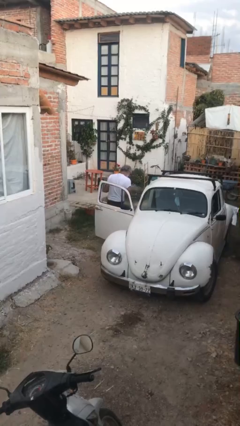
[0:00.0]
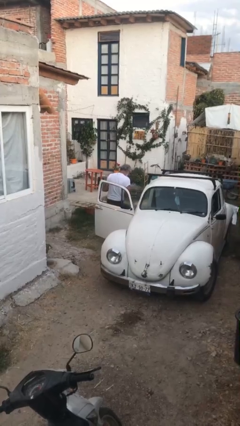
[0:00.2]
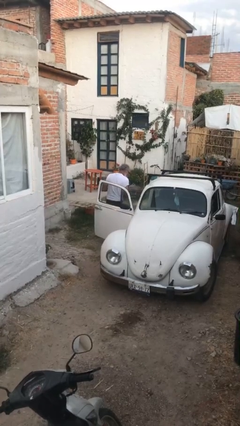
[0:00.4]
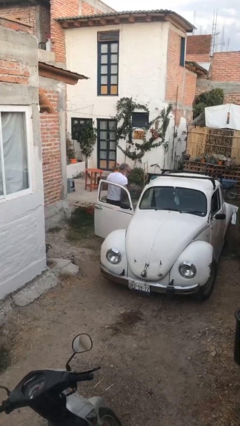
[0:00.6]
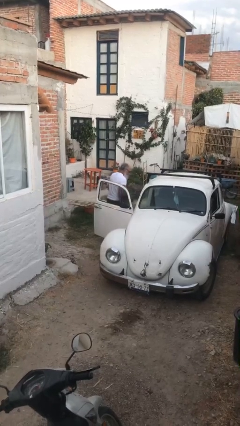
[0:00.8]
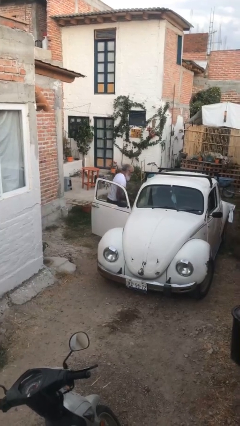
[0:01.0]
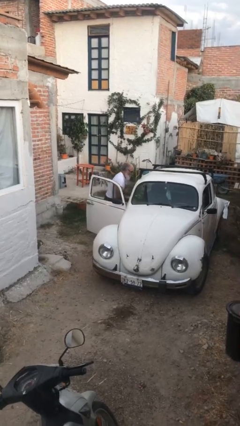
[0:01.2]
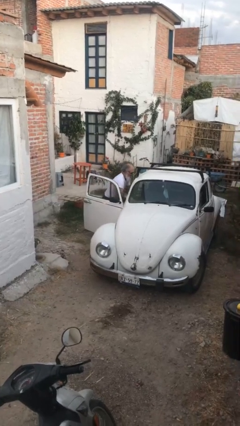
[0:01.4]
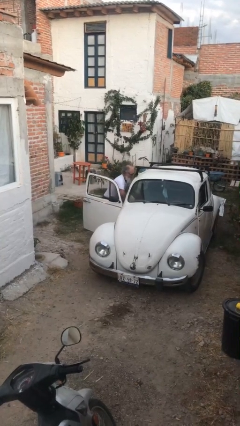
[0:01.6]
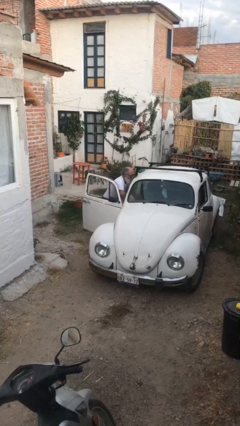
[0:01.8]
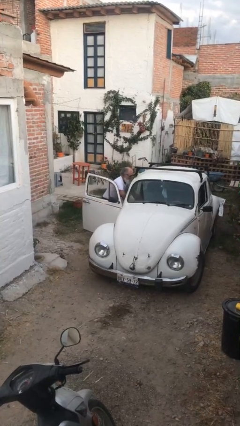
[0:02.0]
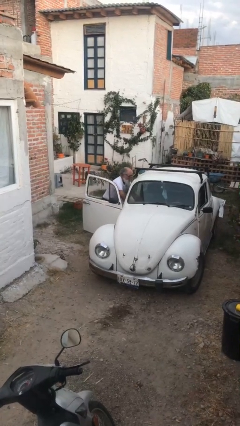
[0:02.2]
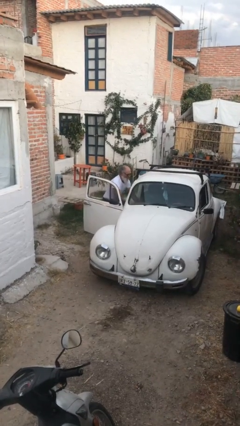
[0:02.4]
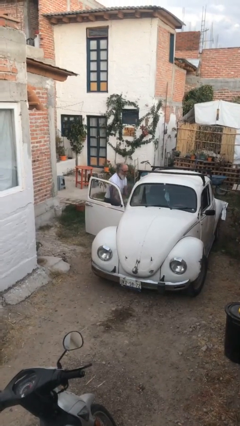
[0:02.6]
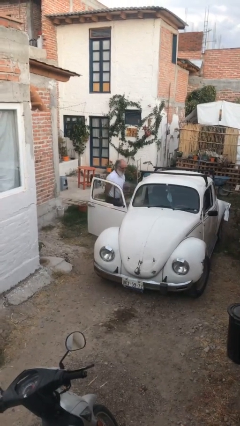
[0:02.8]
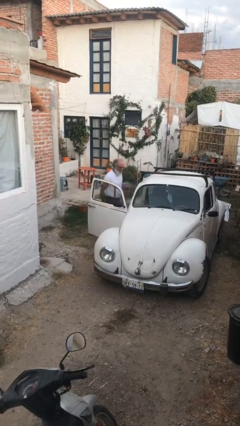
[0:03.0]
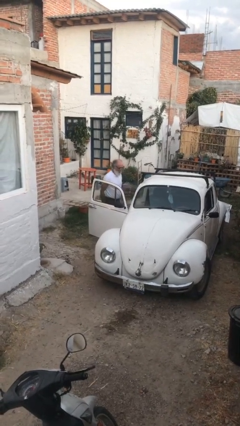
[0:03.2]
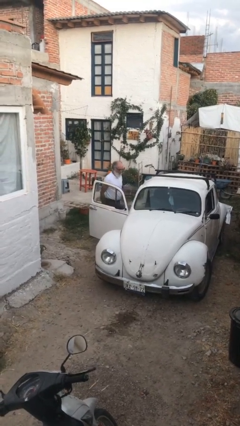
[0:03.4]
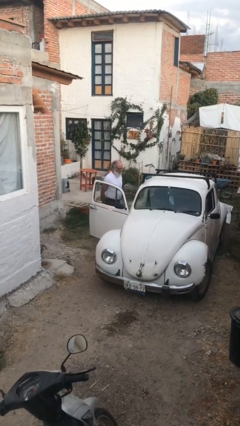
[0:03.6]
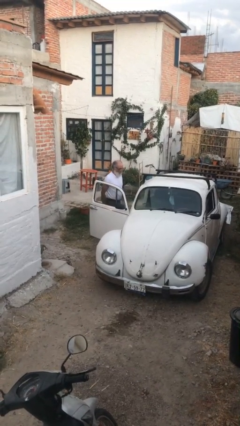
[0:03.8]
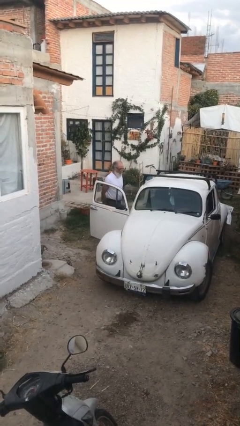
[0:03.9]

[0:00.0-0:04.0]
person loads car

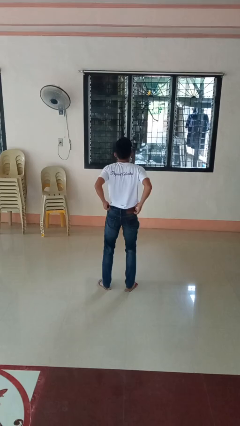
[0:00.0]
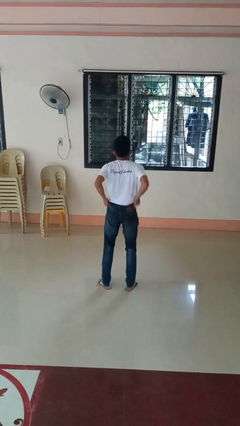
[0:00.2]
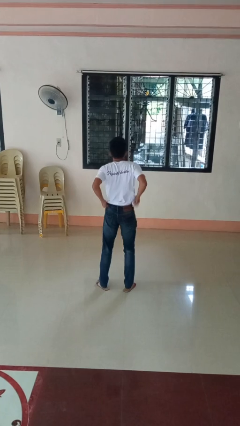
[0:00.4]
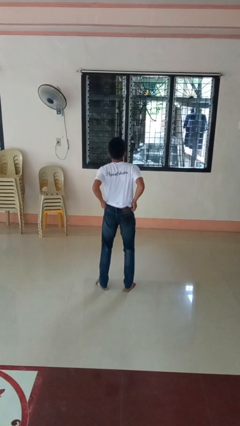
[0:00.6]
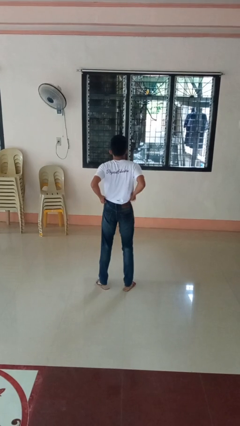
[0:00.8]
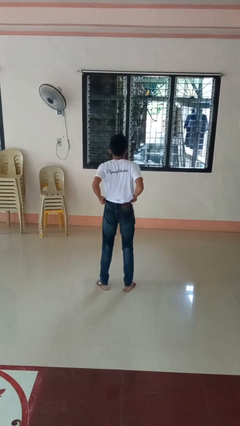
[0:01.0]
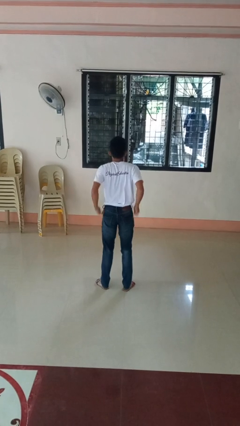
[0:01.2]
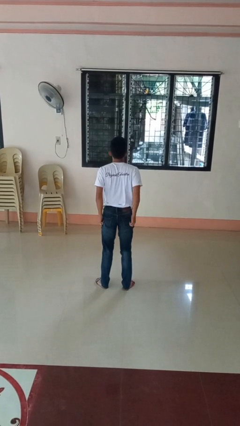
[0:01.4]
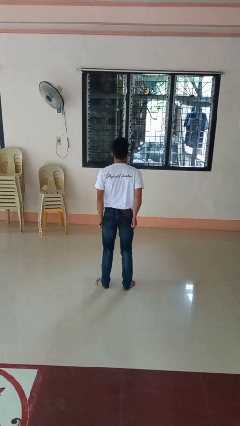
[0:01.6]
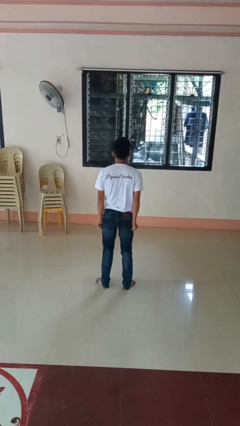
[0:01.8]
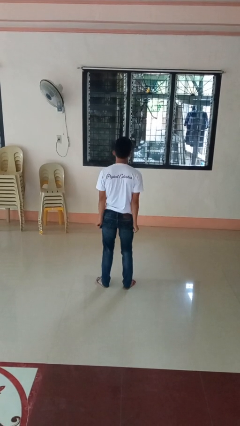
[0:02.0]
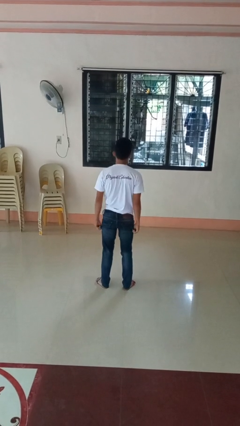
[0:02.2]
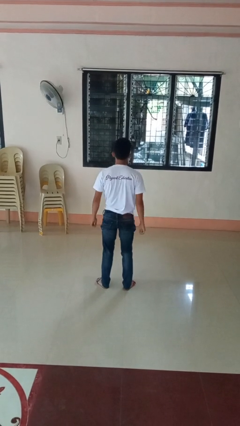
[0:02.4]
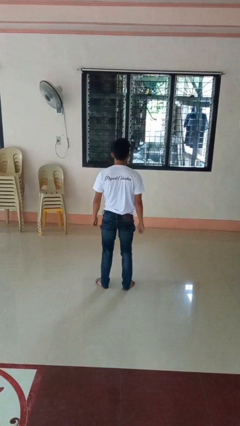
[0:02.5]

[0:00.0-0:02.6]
person hikes up pants

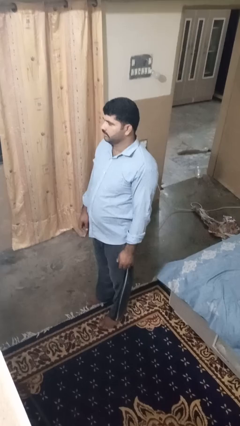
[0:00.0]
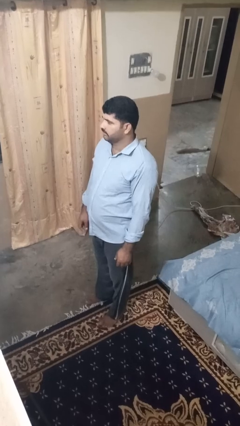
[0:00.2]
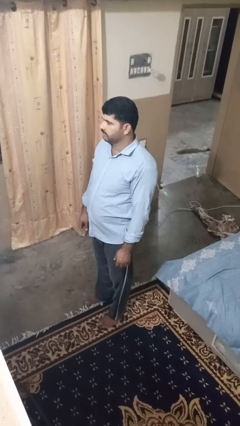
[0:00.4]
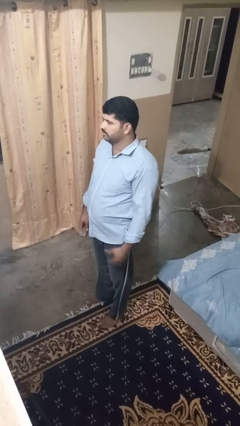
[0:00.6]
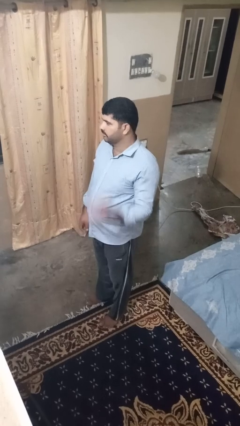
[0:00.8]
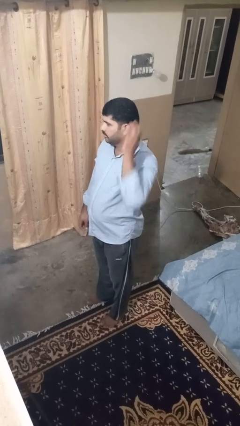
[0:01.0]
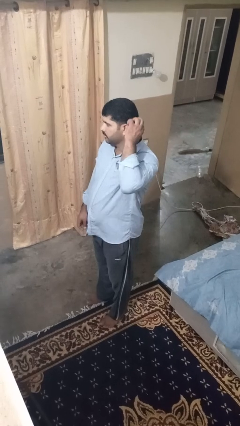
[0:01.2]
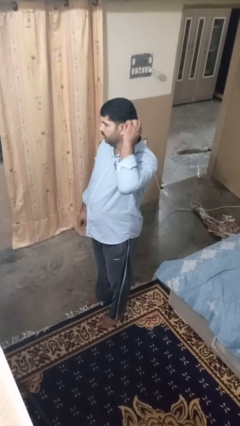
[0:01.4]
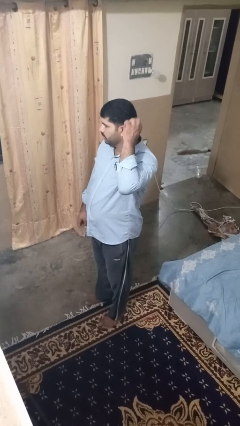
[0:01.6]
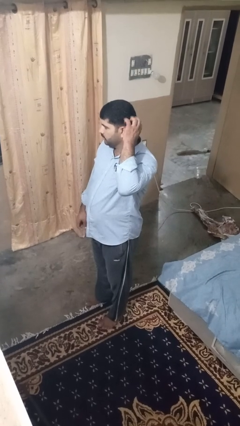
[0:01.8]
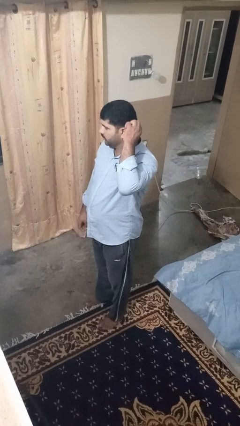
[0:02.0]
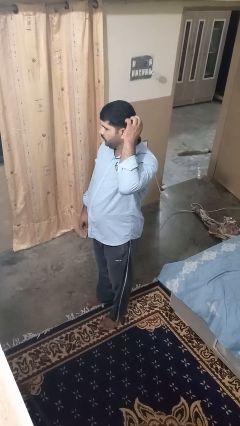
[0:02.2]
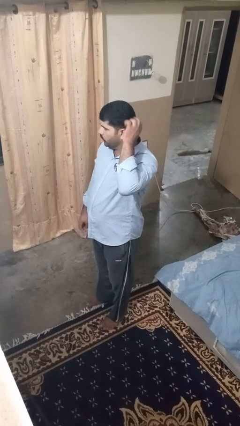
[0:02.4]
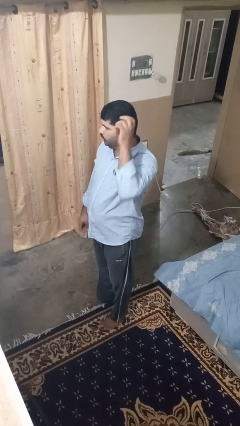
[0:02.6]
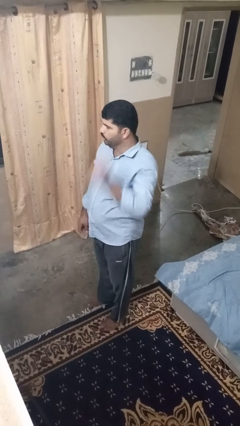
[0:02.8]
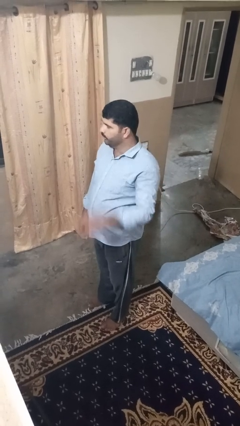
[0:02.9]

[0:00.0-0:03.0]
person strokes hair

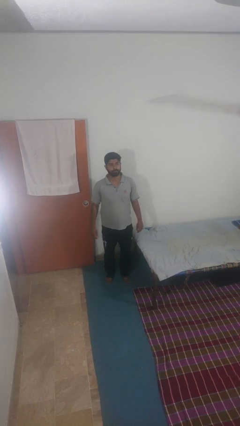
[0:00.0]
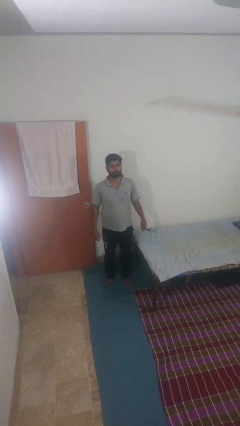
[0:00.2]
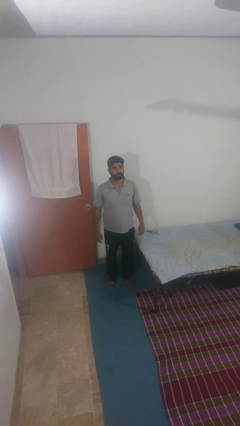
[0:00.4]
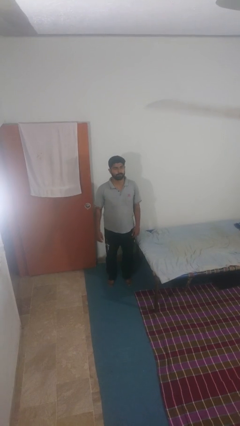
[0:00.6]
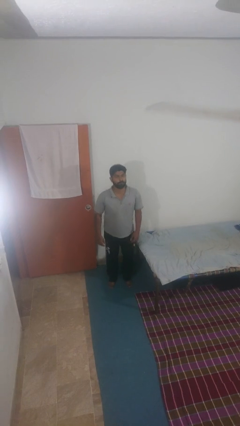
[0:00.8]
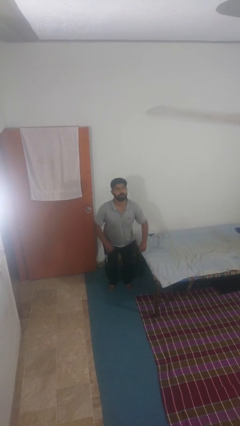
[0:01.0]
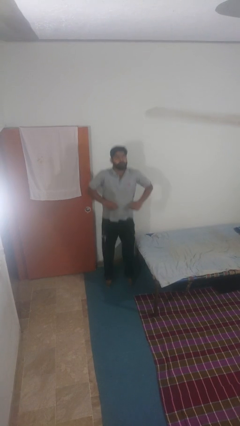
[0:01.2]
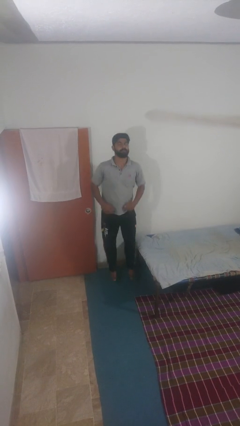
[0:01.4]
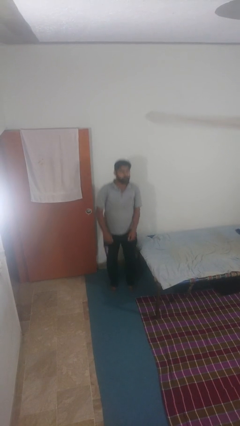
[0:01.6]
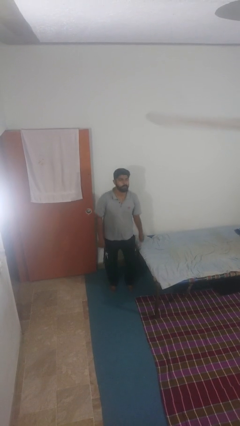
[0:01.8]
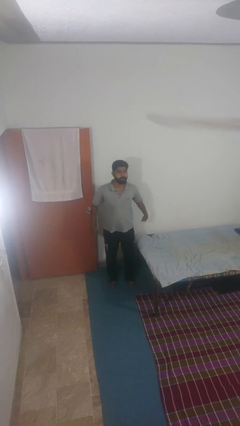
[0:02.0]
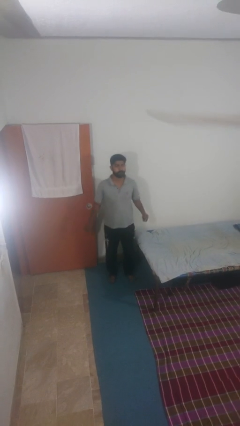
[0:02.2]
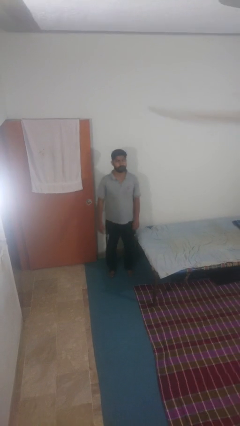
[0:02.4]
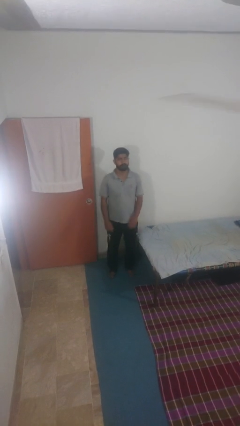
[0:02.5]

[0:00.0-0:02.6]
person jumps

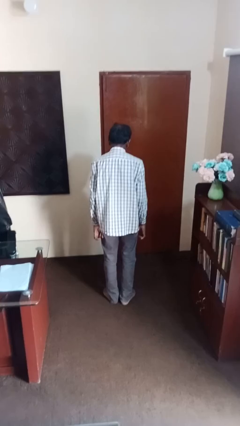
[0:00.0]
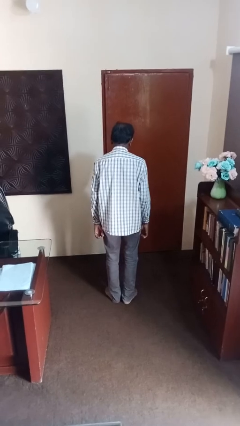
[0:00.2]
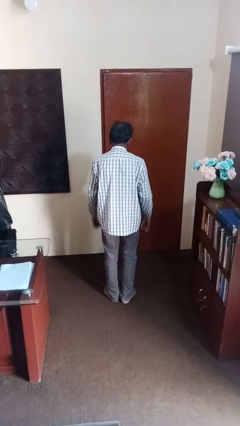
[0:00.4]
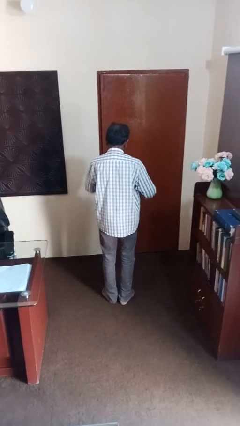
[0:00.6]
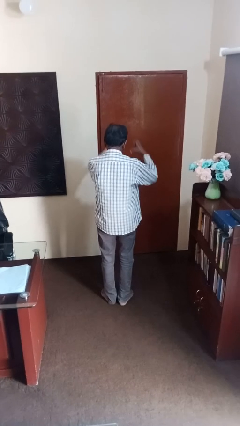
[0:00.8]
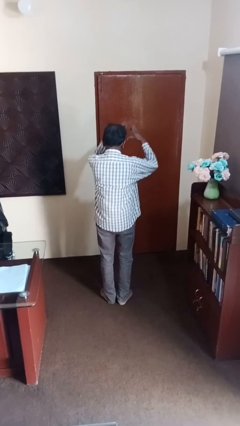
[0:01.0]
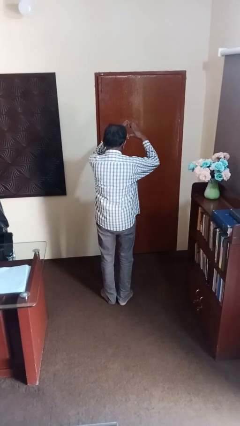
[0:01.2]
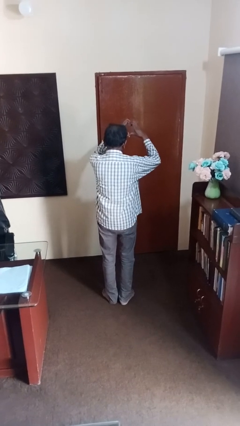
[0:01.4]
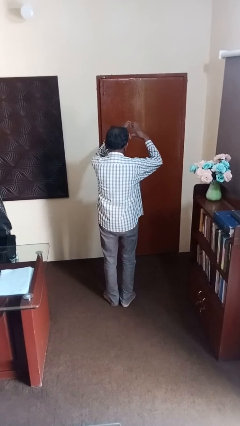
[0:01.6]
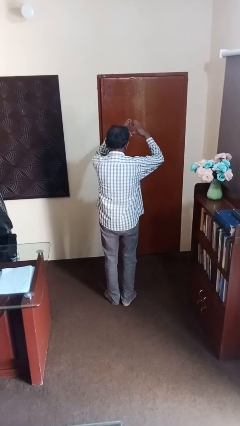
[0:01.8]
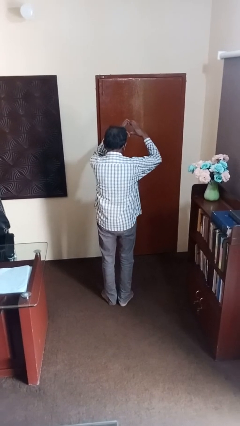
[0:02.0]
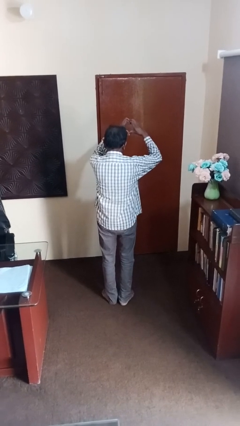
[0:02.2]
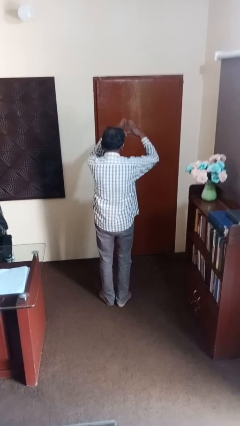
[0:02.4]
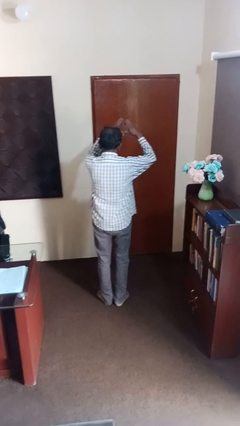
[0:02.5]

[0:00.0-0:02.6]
person gestures heart

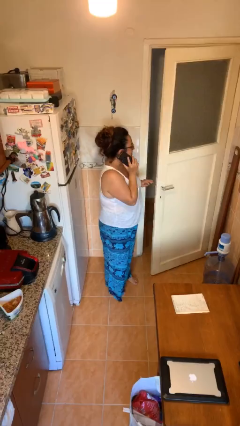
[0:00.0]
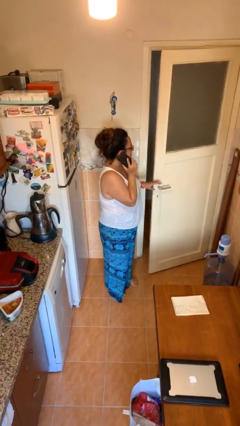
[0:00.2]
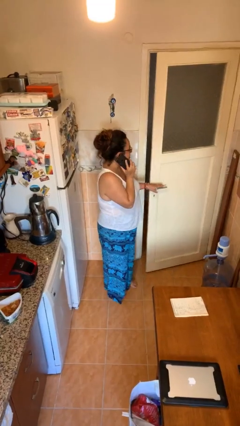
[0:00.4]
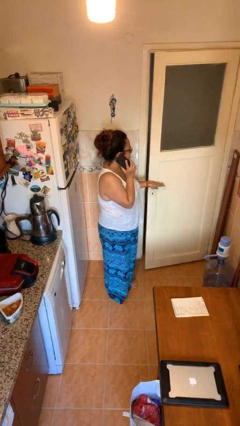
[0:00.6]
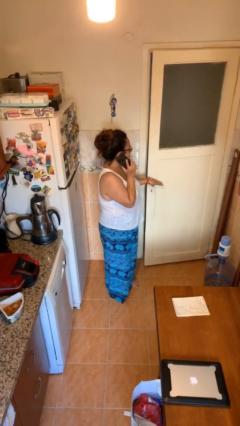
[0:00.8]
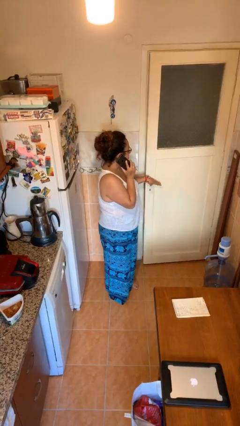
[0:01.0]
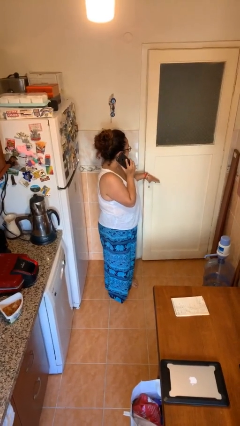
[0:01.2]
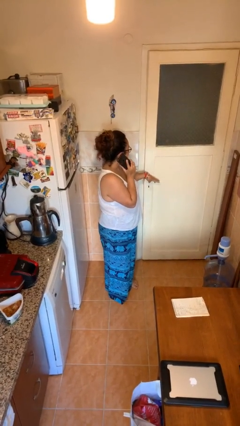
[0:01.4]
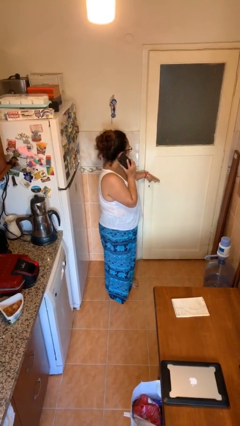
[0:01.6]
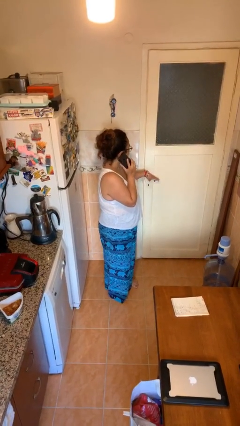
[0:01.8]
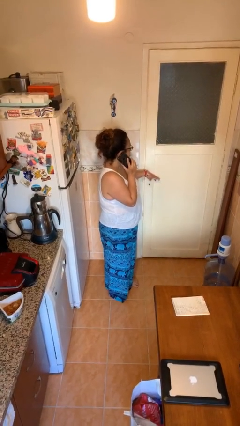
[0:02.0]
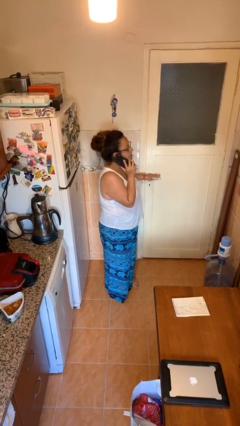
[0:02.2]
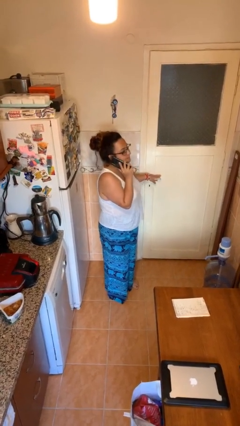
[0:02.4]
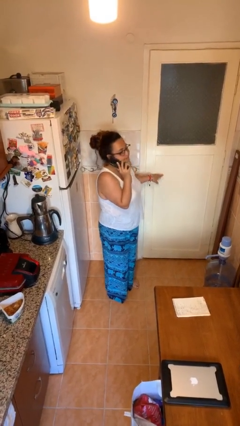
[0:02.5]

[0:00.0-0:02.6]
person closes facility door

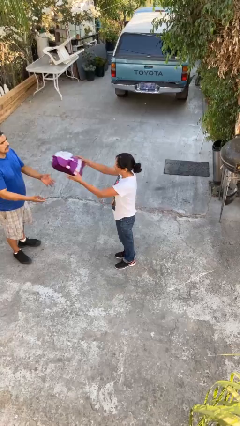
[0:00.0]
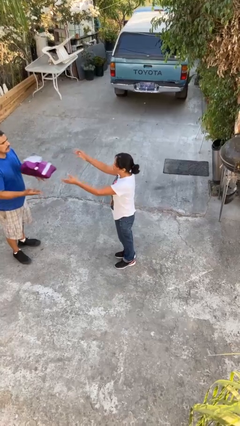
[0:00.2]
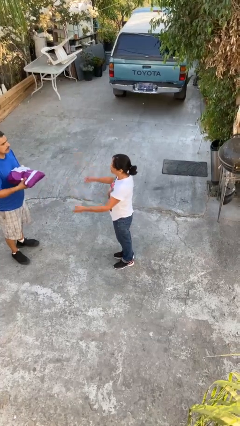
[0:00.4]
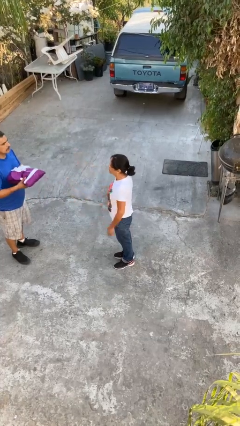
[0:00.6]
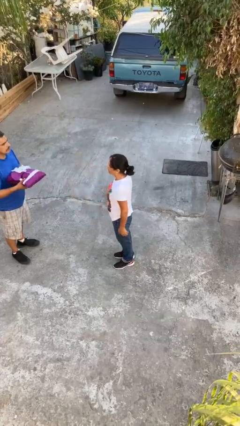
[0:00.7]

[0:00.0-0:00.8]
person throws object to person
